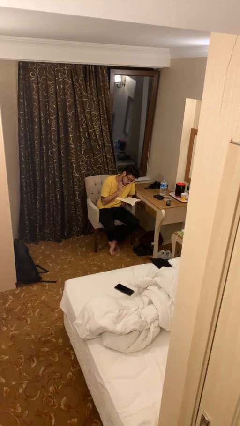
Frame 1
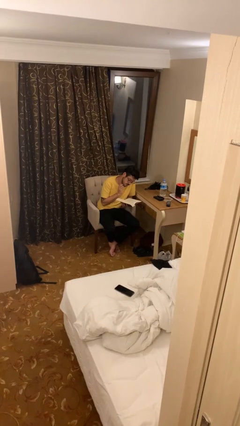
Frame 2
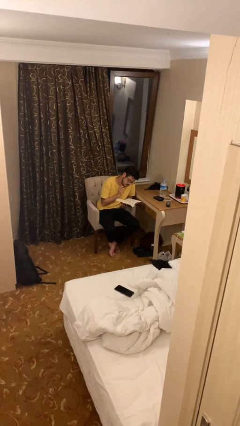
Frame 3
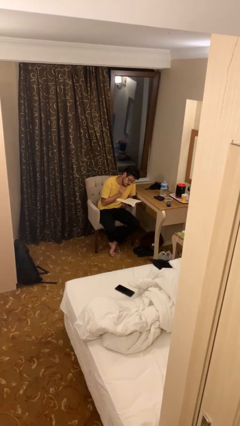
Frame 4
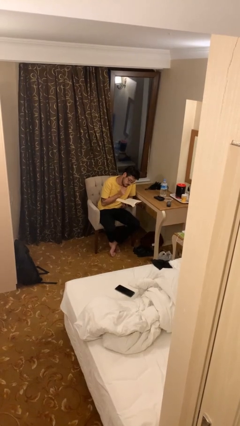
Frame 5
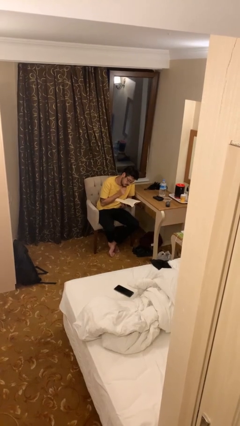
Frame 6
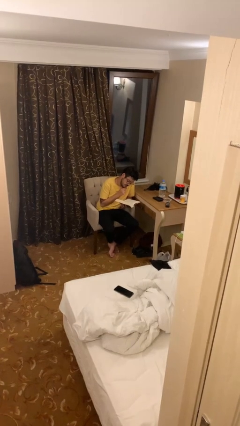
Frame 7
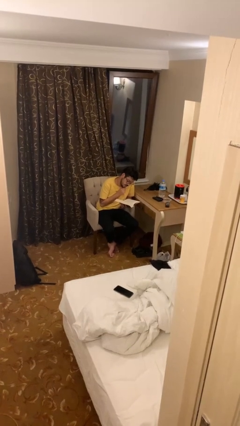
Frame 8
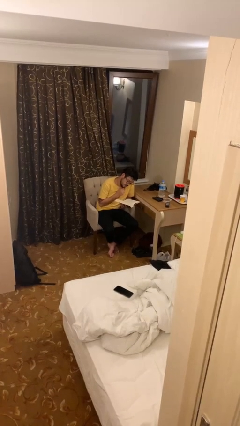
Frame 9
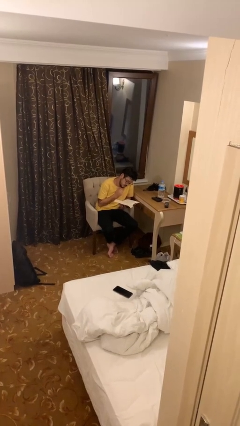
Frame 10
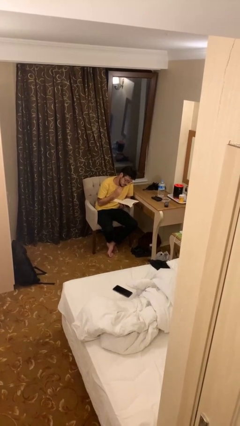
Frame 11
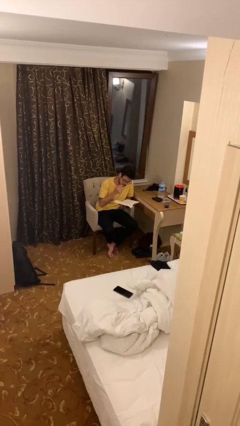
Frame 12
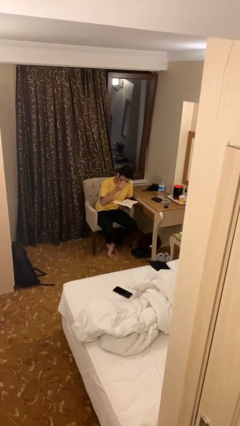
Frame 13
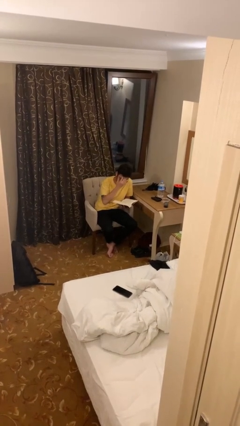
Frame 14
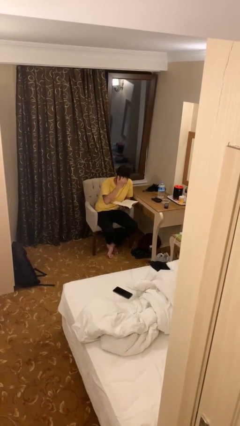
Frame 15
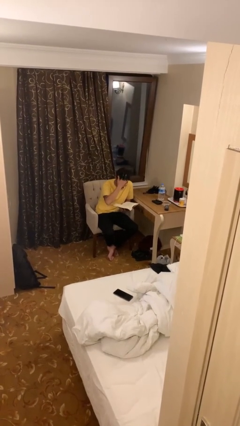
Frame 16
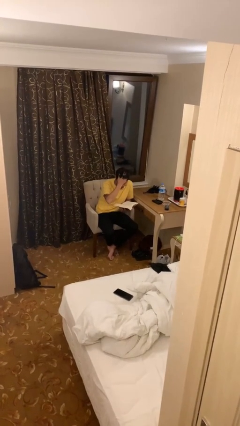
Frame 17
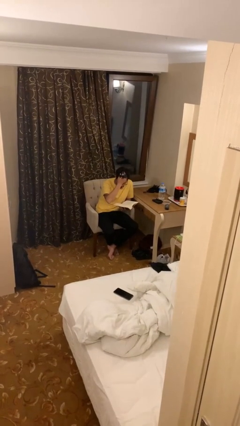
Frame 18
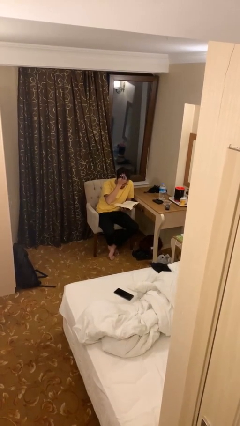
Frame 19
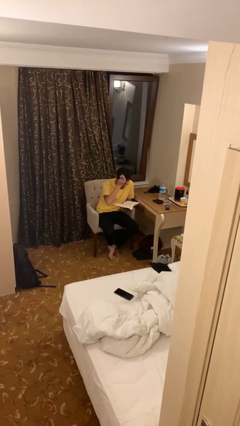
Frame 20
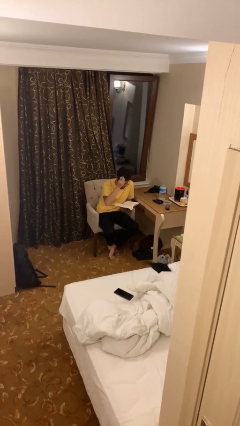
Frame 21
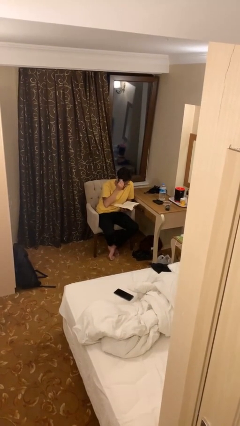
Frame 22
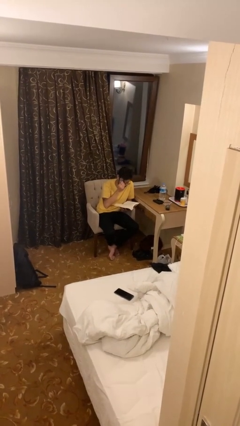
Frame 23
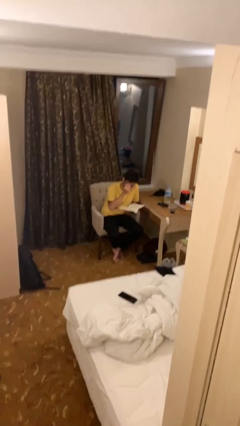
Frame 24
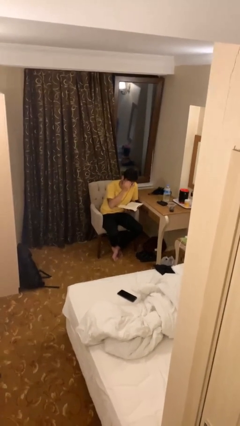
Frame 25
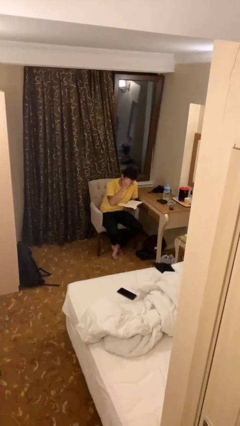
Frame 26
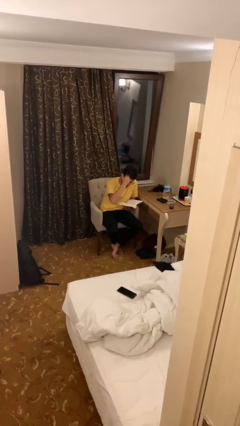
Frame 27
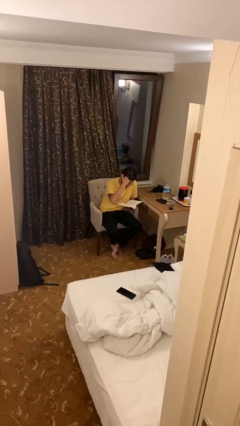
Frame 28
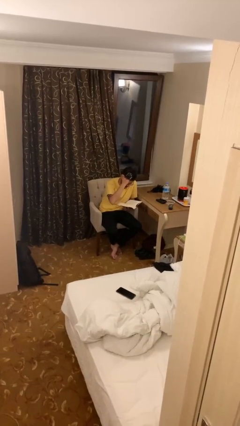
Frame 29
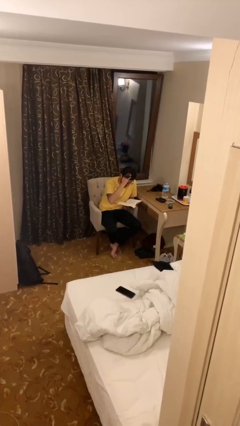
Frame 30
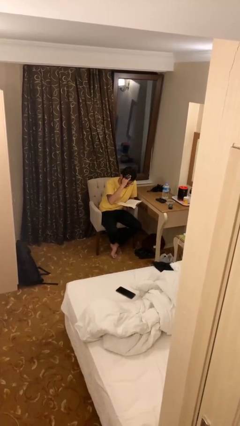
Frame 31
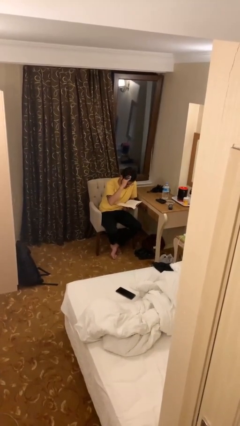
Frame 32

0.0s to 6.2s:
person reads document

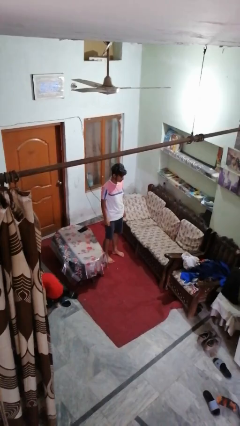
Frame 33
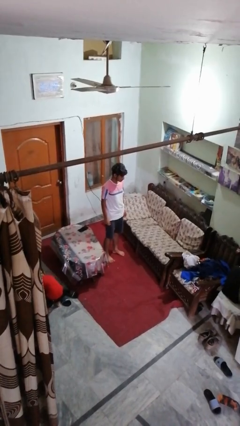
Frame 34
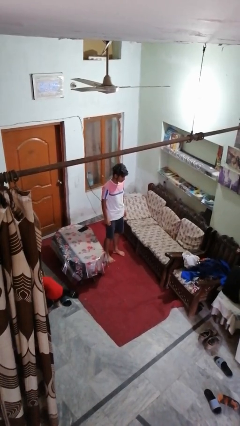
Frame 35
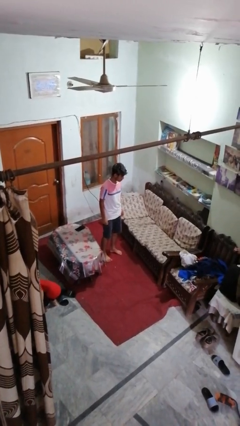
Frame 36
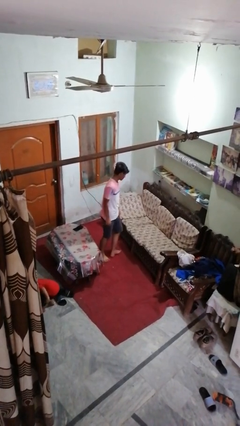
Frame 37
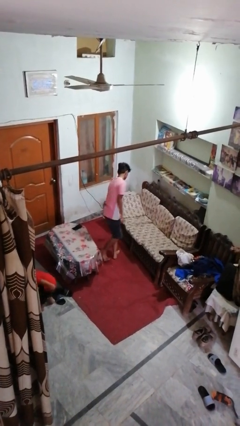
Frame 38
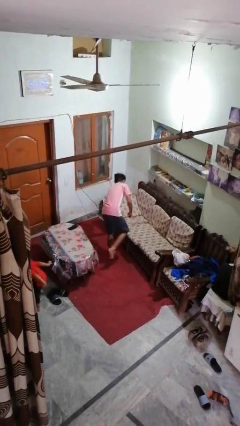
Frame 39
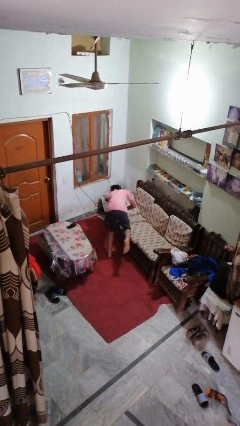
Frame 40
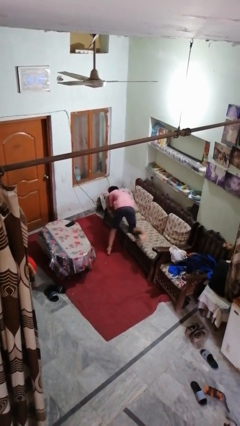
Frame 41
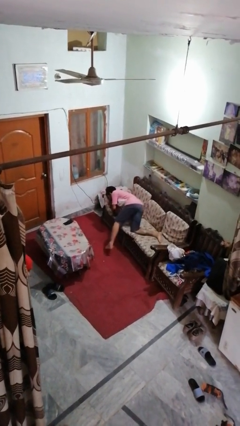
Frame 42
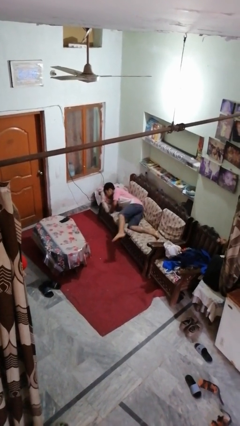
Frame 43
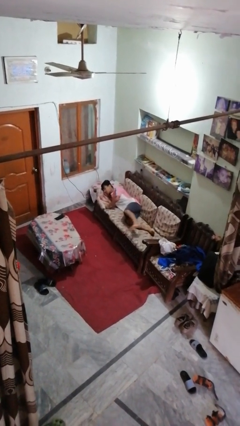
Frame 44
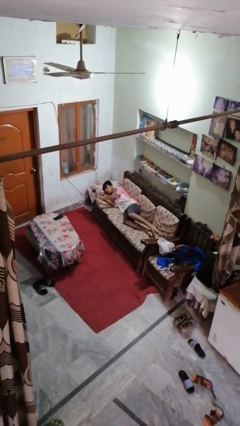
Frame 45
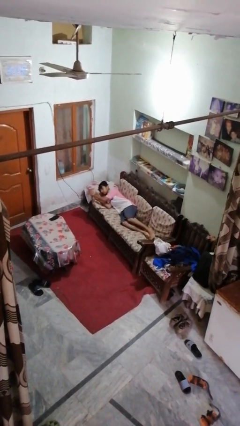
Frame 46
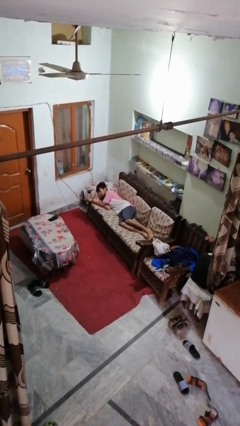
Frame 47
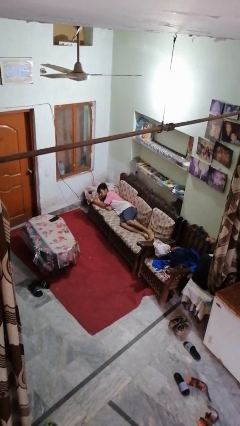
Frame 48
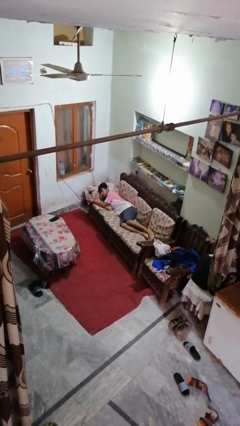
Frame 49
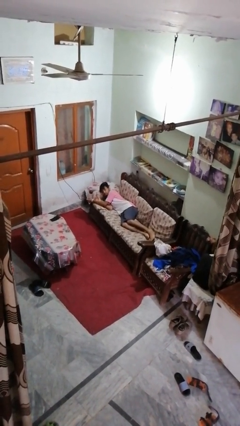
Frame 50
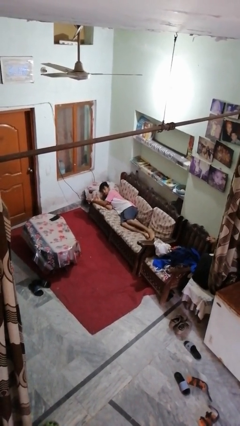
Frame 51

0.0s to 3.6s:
person lies down on couch

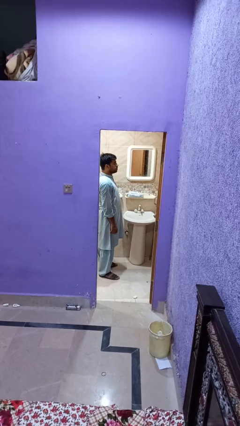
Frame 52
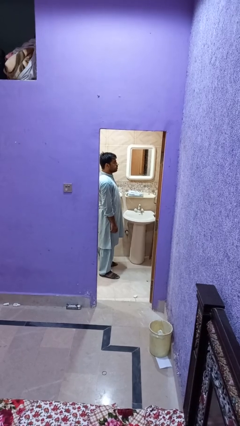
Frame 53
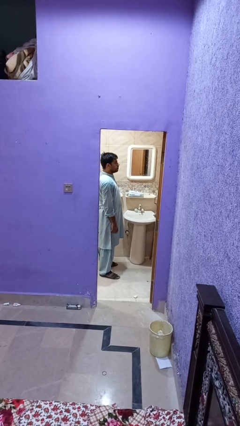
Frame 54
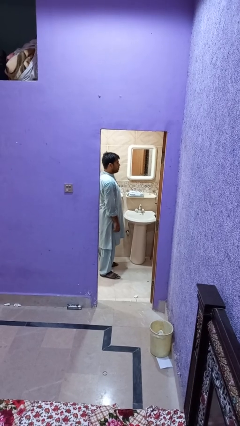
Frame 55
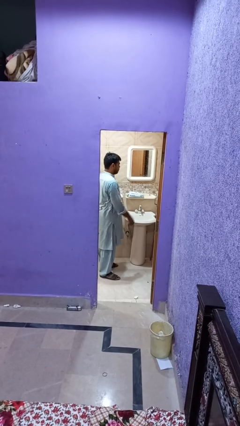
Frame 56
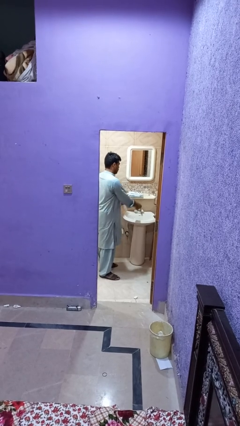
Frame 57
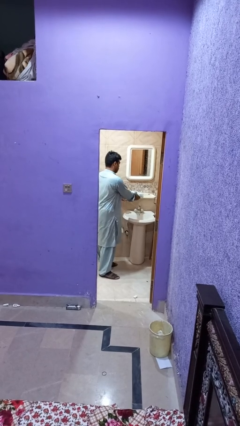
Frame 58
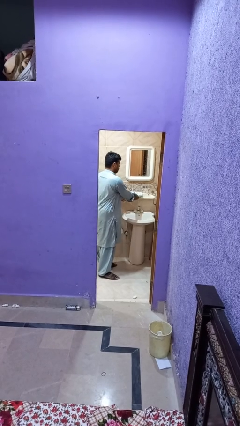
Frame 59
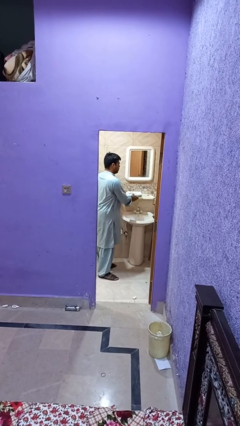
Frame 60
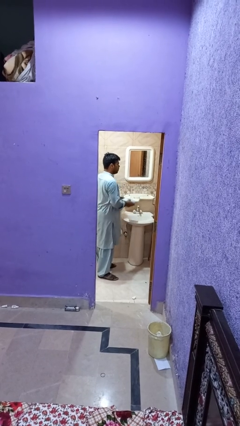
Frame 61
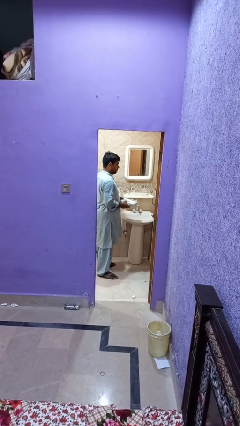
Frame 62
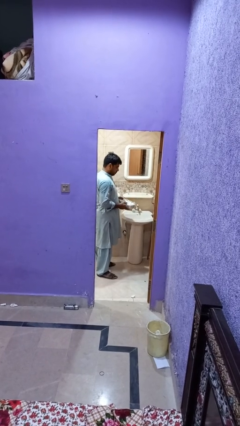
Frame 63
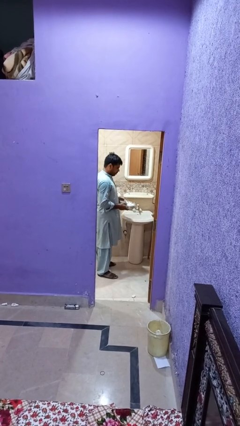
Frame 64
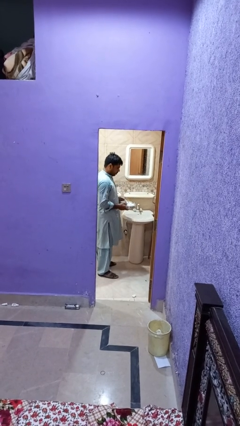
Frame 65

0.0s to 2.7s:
person picks up object from countertop

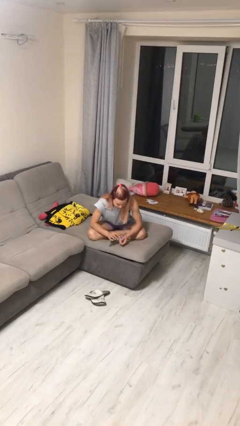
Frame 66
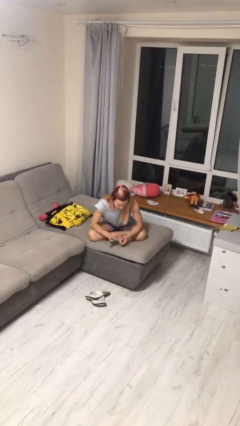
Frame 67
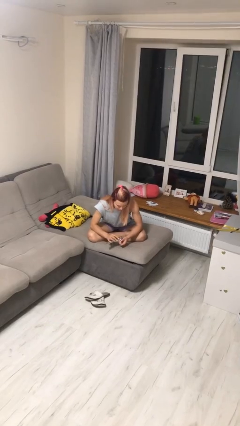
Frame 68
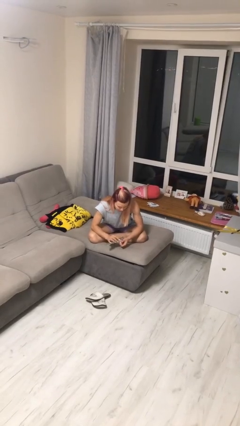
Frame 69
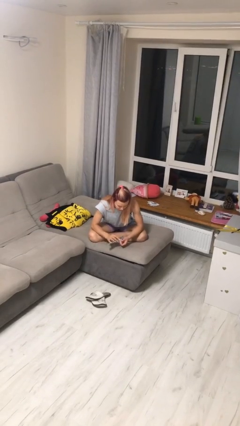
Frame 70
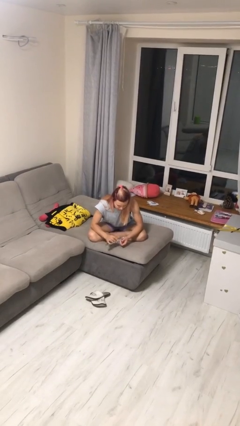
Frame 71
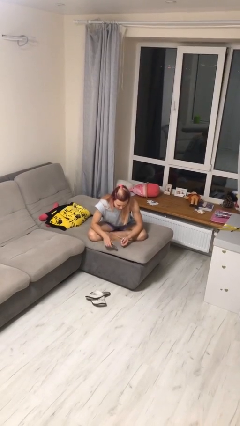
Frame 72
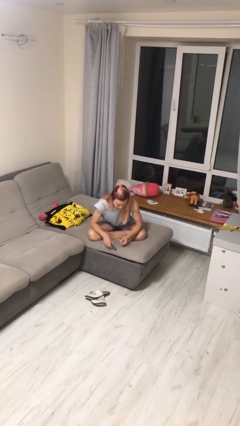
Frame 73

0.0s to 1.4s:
person files fingernails

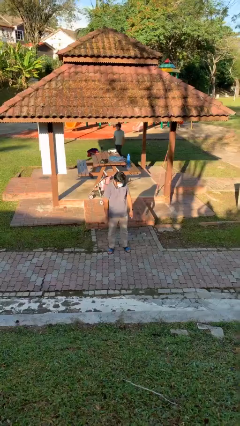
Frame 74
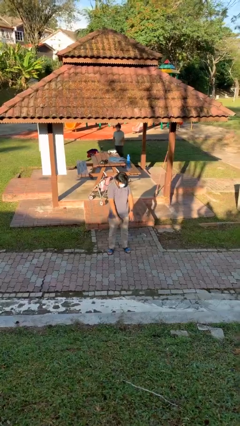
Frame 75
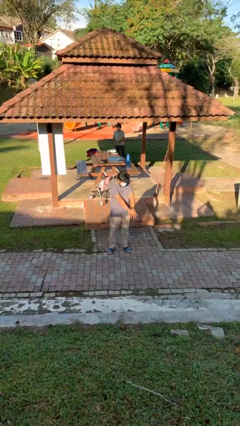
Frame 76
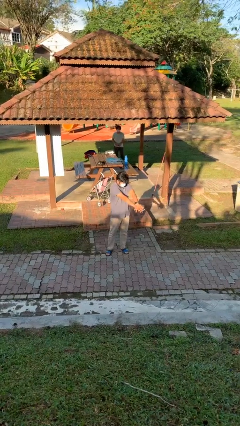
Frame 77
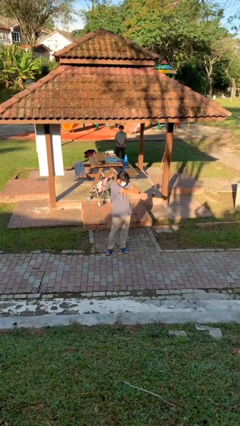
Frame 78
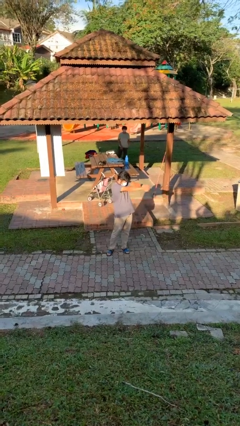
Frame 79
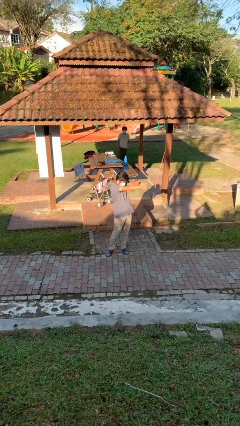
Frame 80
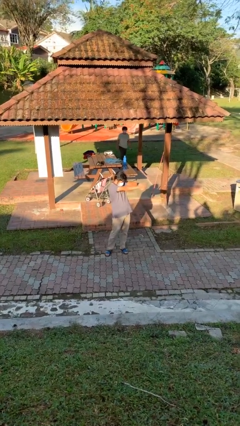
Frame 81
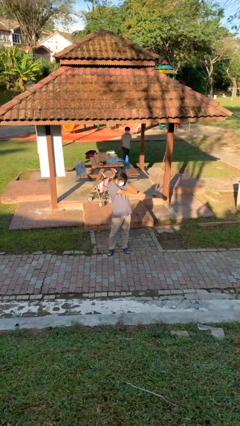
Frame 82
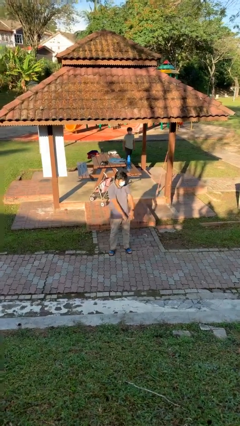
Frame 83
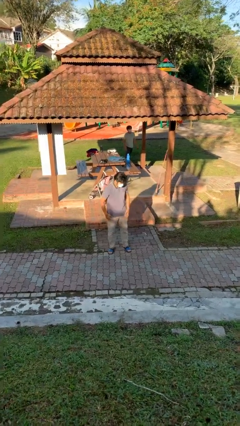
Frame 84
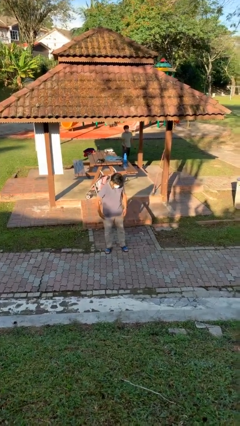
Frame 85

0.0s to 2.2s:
person crosses arms

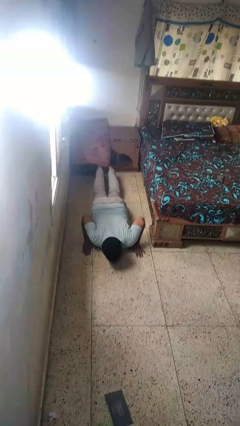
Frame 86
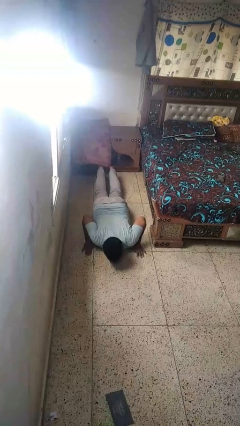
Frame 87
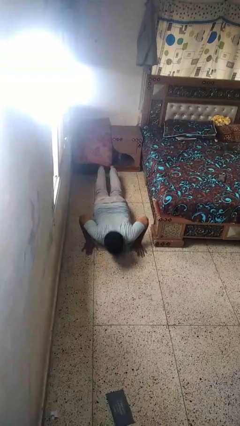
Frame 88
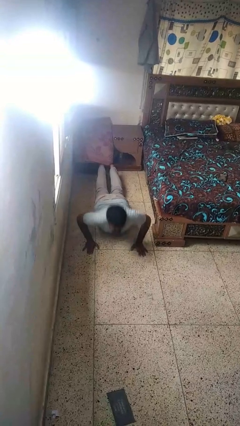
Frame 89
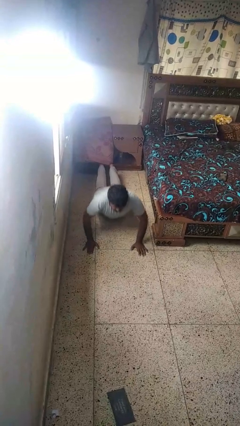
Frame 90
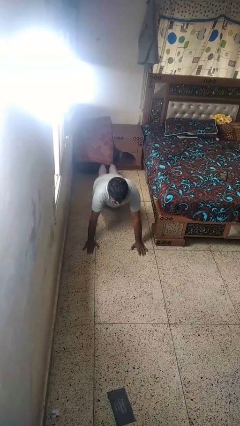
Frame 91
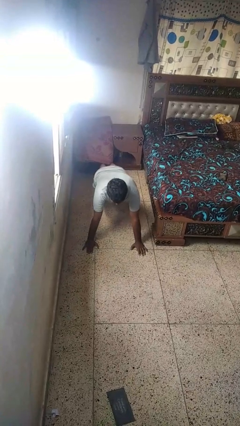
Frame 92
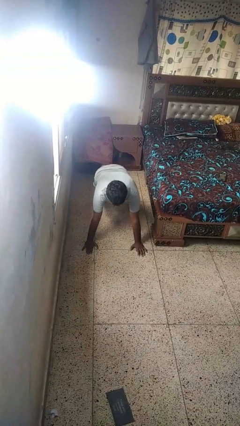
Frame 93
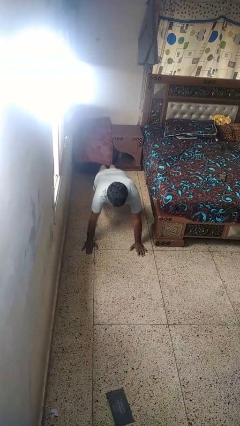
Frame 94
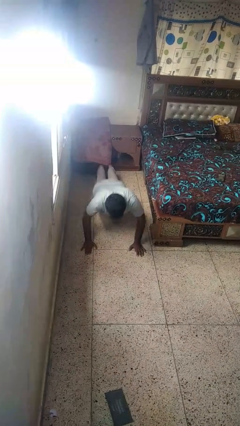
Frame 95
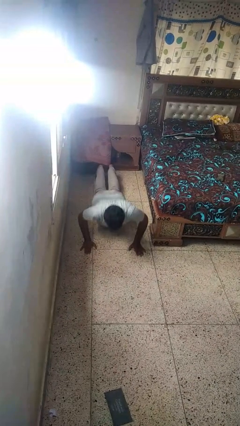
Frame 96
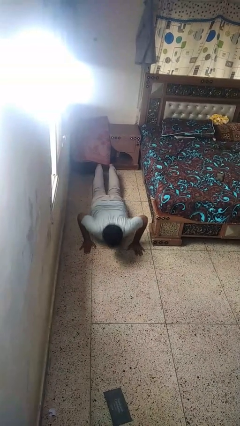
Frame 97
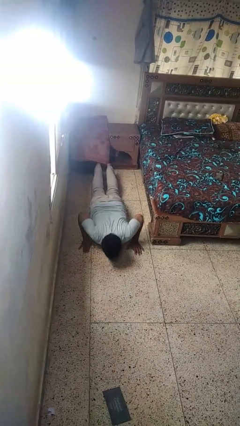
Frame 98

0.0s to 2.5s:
person exercises with pushup
